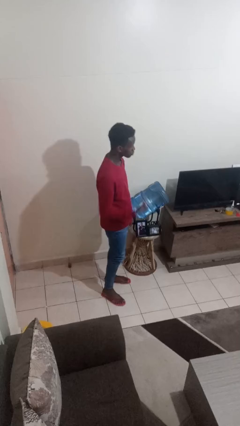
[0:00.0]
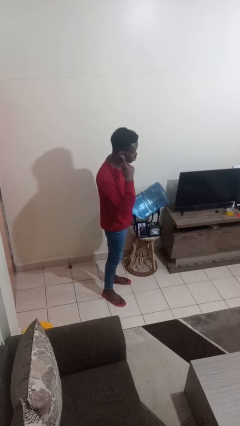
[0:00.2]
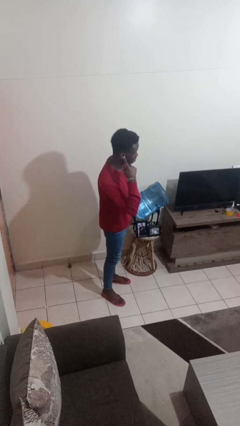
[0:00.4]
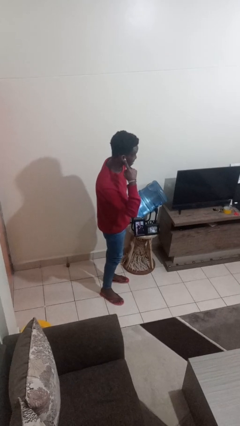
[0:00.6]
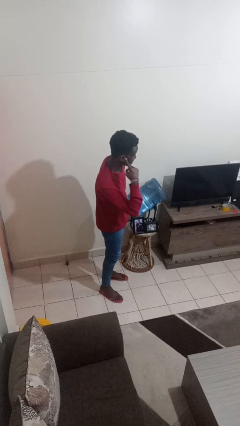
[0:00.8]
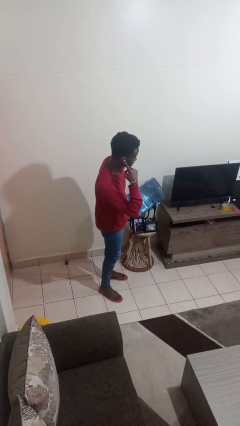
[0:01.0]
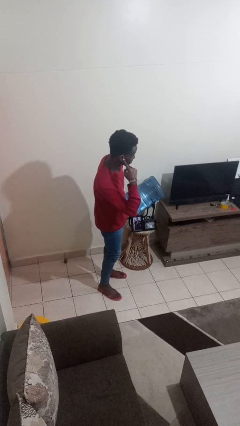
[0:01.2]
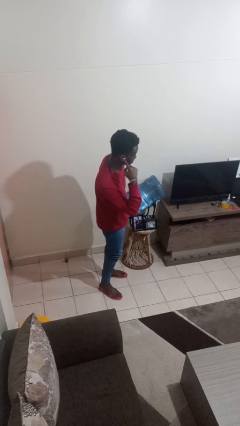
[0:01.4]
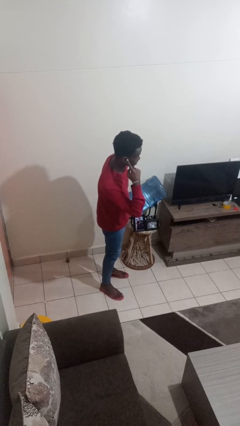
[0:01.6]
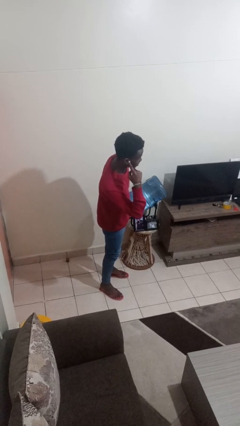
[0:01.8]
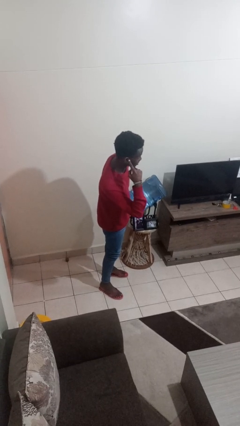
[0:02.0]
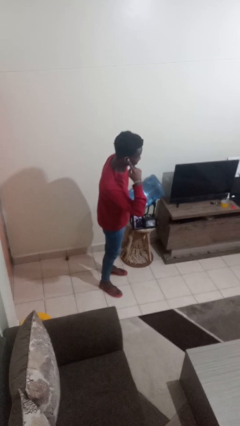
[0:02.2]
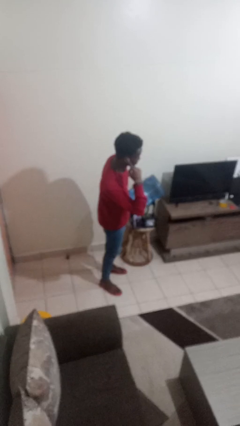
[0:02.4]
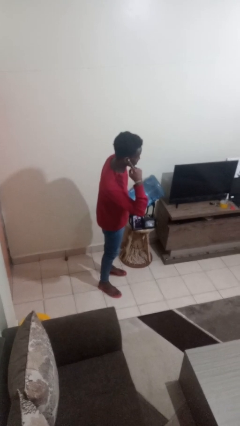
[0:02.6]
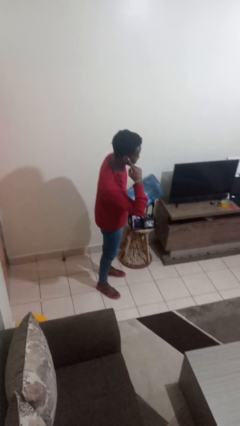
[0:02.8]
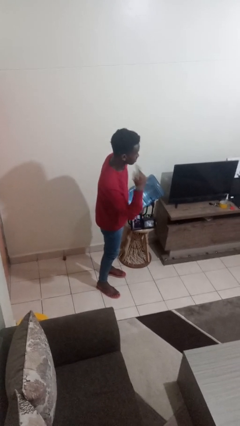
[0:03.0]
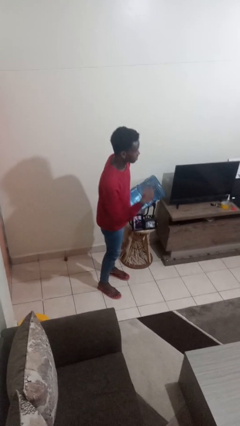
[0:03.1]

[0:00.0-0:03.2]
person gestures listen closely

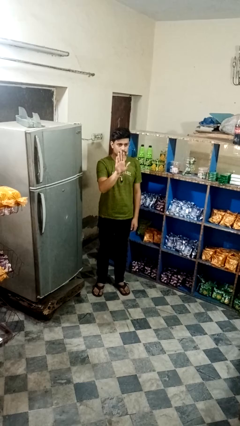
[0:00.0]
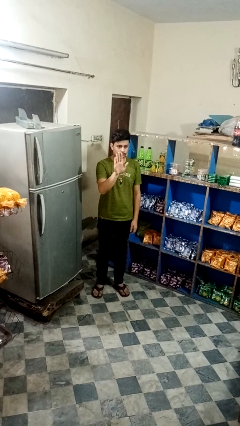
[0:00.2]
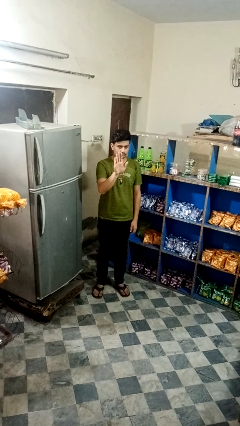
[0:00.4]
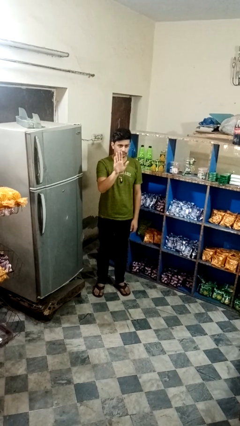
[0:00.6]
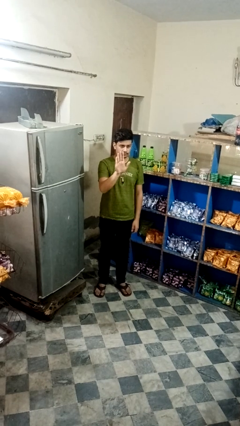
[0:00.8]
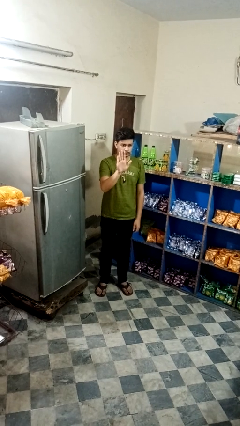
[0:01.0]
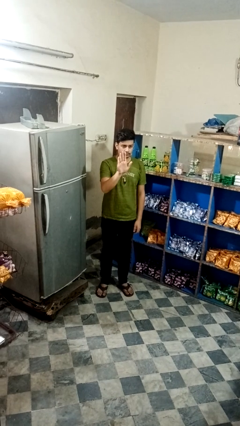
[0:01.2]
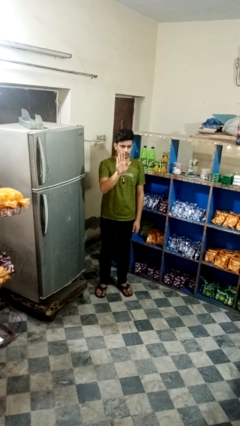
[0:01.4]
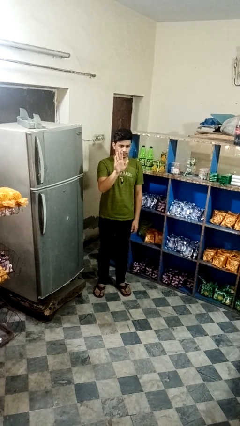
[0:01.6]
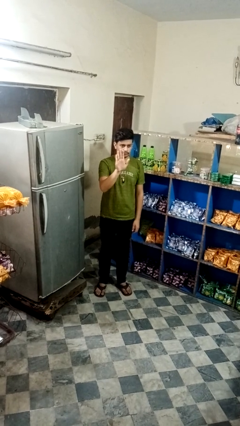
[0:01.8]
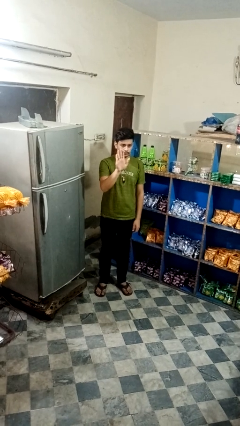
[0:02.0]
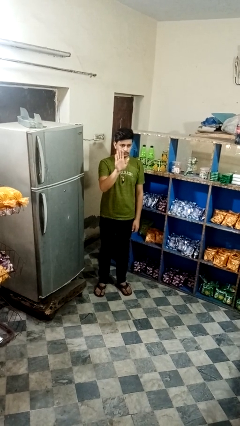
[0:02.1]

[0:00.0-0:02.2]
person gestures stop

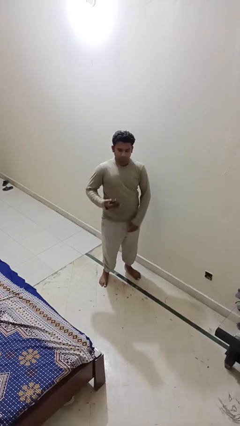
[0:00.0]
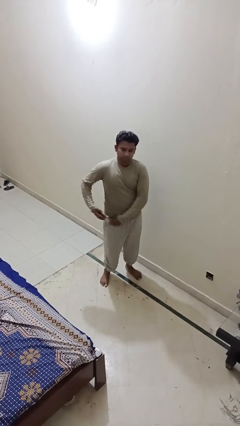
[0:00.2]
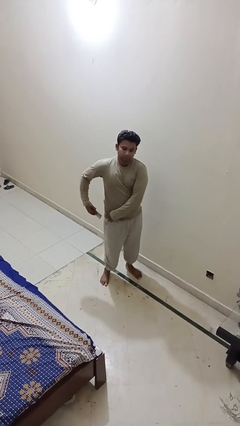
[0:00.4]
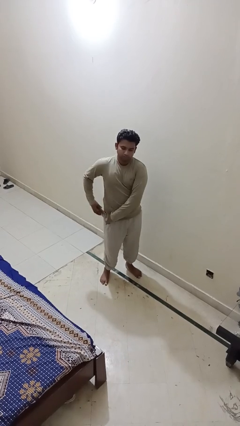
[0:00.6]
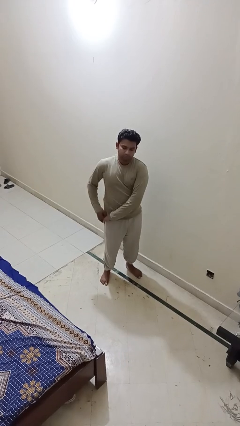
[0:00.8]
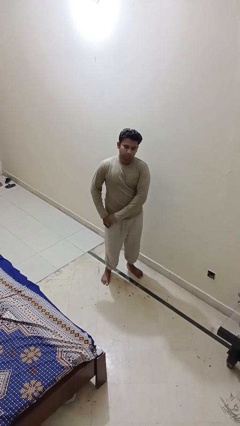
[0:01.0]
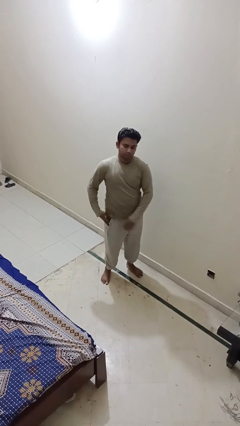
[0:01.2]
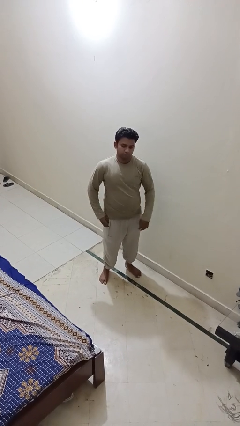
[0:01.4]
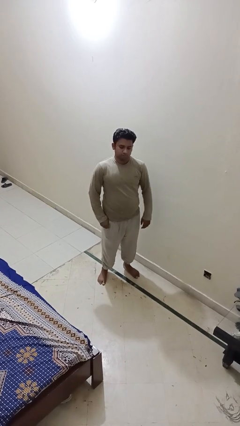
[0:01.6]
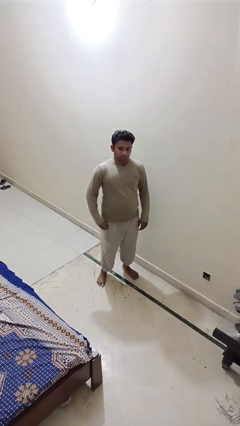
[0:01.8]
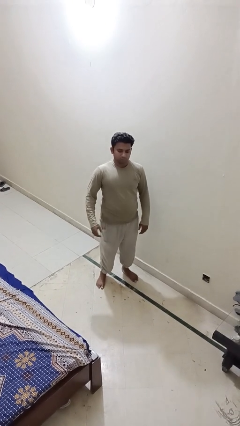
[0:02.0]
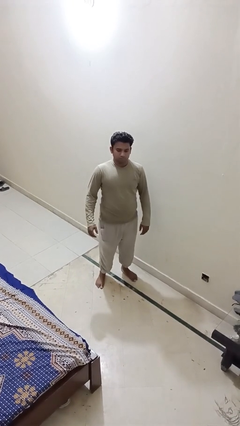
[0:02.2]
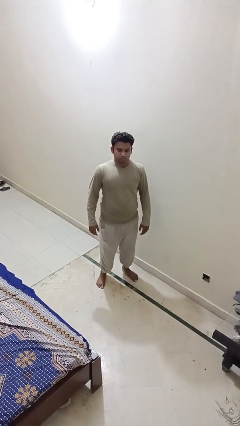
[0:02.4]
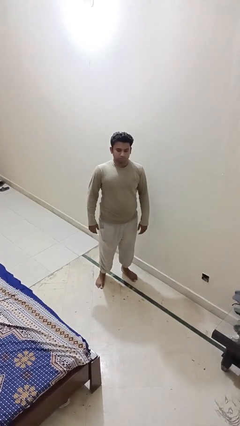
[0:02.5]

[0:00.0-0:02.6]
person puts phone into pocket

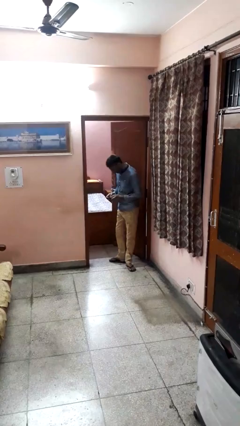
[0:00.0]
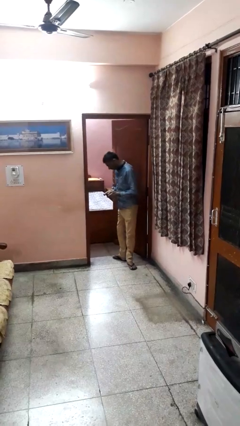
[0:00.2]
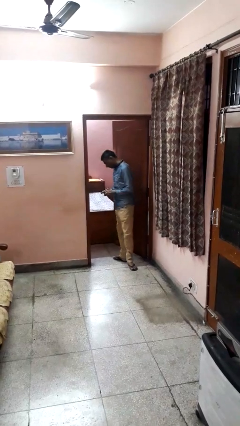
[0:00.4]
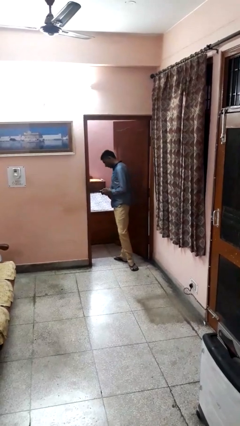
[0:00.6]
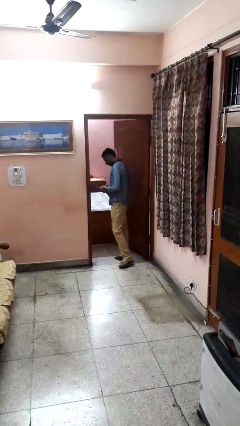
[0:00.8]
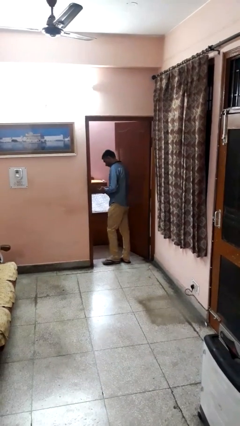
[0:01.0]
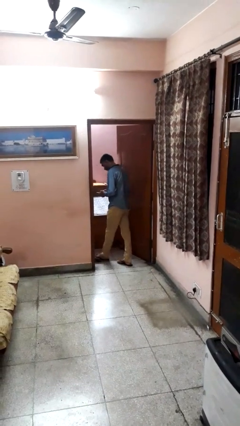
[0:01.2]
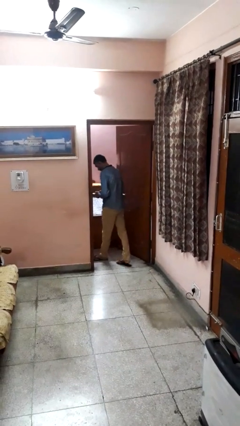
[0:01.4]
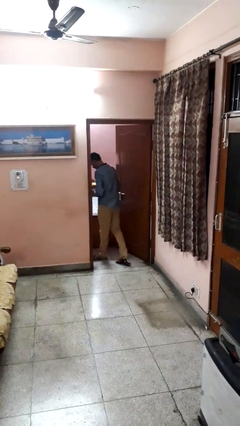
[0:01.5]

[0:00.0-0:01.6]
person exits scene through structure

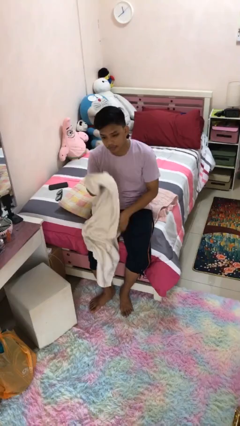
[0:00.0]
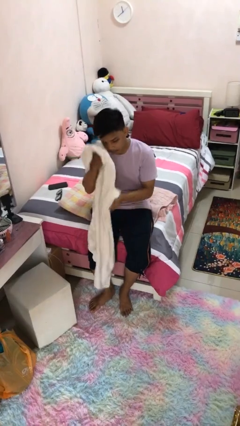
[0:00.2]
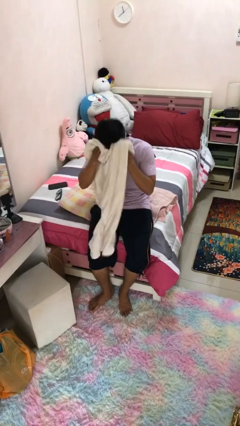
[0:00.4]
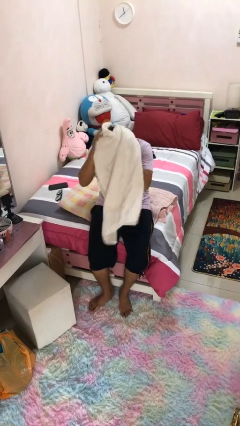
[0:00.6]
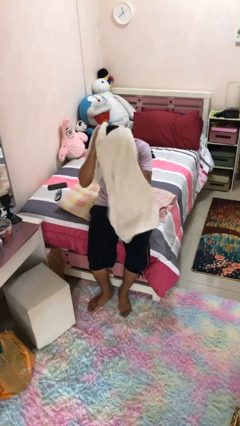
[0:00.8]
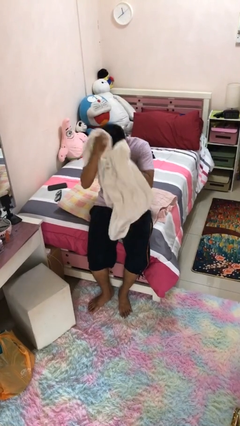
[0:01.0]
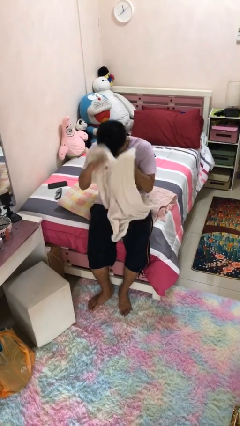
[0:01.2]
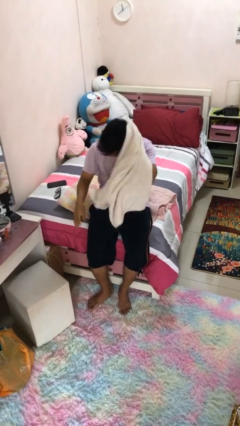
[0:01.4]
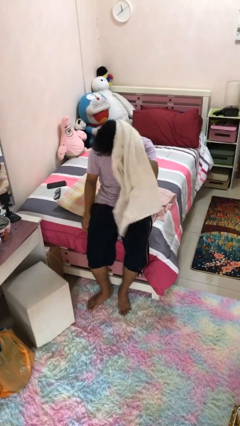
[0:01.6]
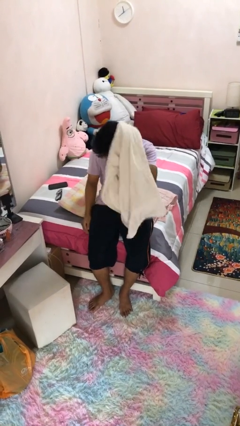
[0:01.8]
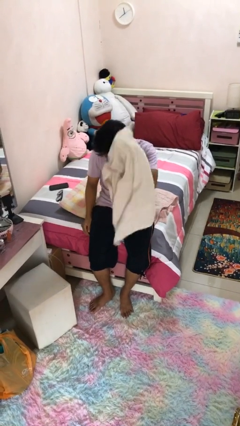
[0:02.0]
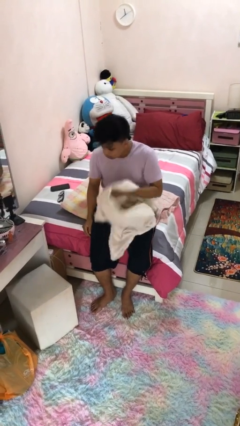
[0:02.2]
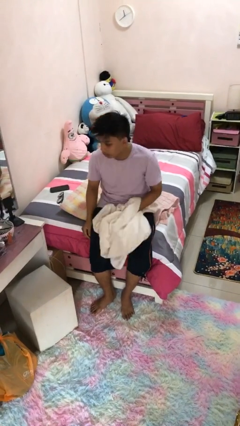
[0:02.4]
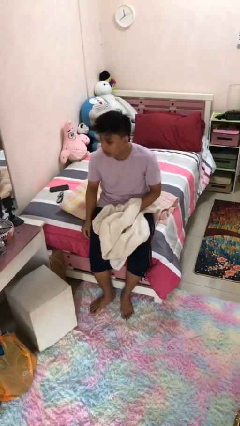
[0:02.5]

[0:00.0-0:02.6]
person dries hair with towel

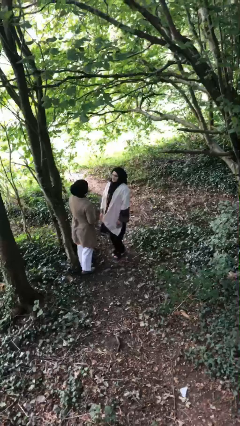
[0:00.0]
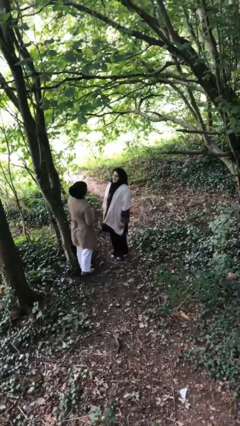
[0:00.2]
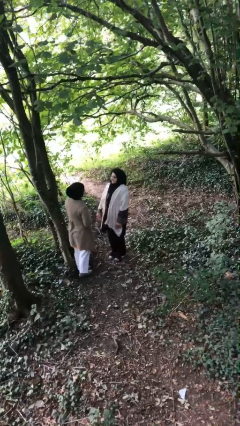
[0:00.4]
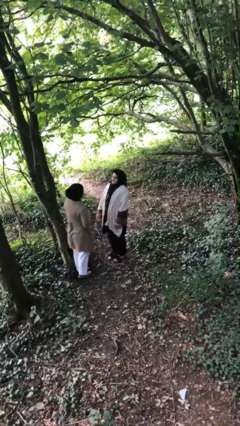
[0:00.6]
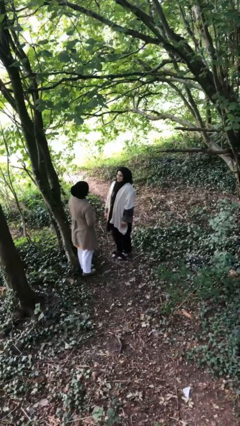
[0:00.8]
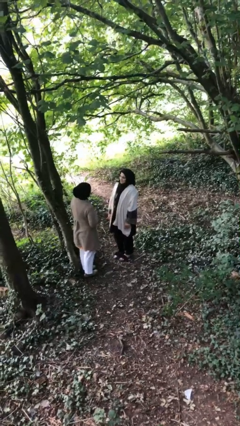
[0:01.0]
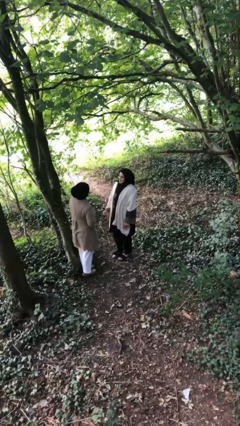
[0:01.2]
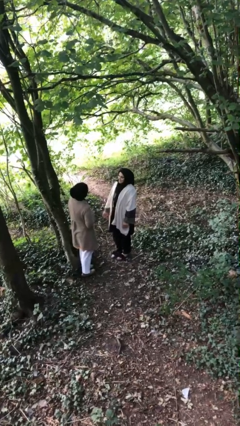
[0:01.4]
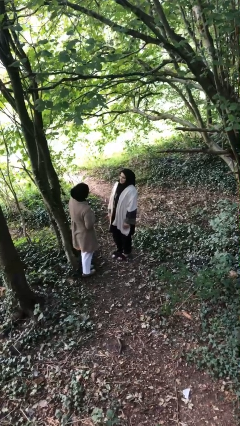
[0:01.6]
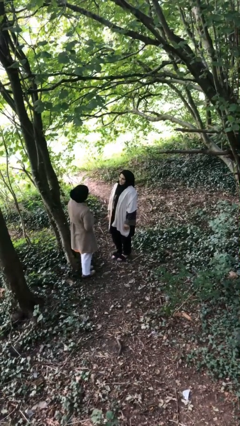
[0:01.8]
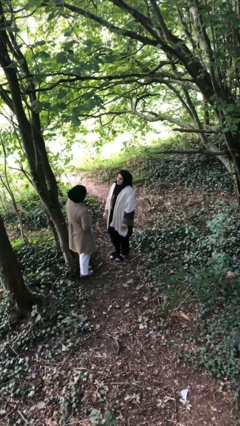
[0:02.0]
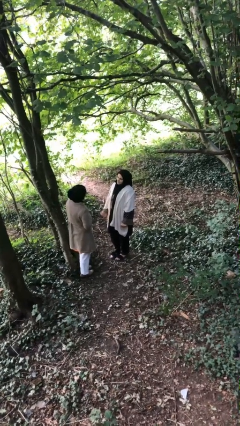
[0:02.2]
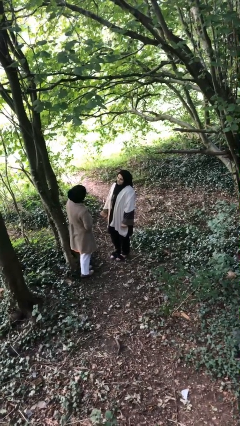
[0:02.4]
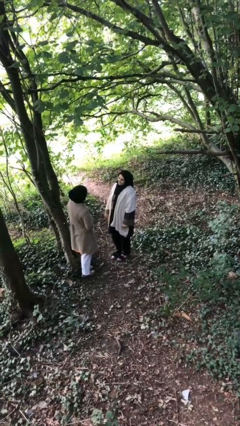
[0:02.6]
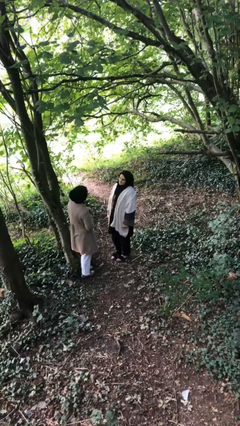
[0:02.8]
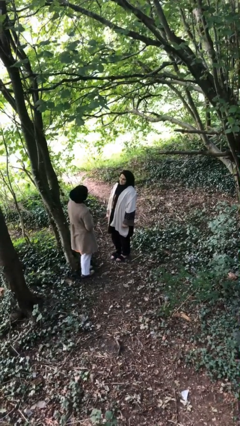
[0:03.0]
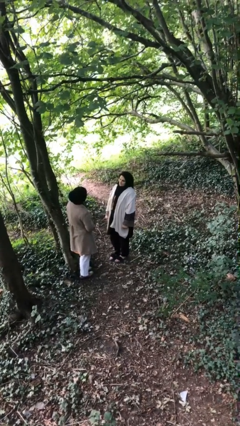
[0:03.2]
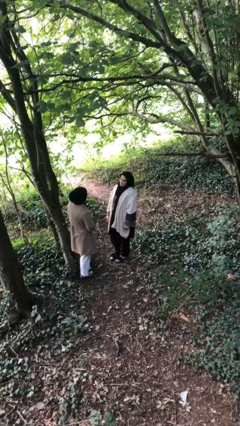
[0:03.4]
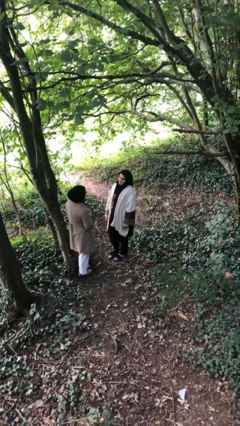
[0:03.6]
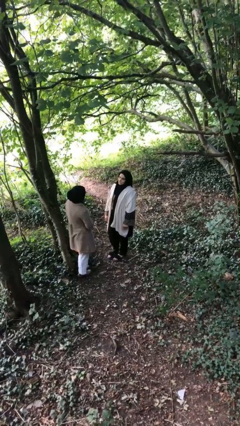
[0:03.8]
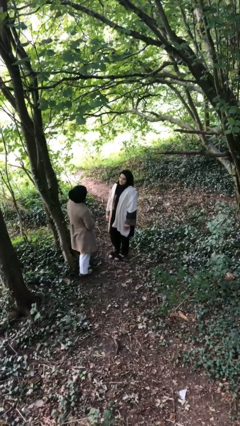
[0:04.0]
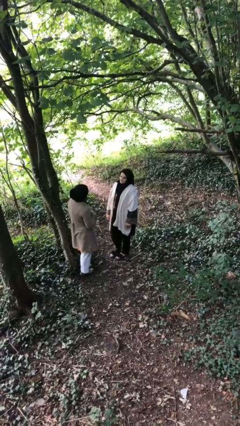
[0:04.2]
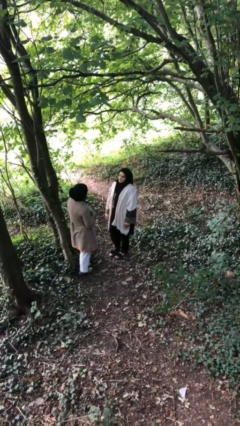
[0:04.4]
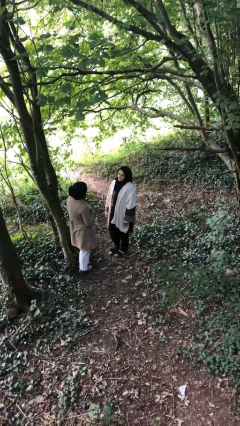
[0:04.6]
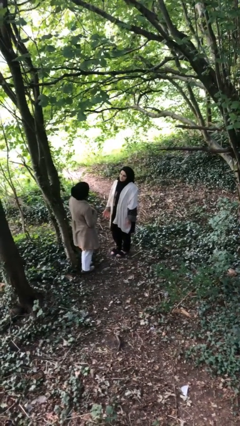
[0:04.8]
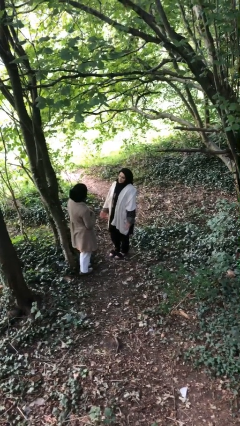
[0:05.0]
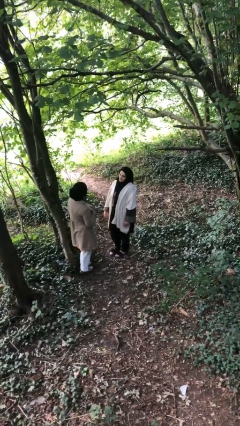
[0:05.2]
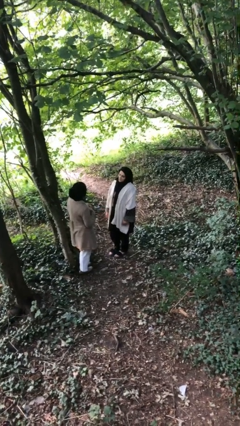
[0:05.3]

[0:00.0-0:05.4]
person talks to person
